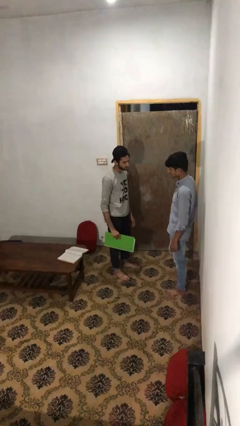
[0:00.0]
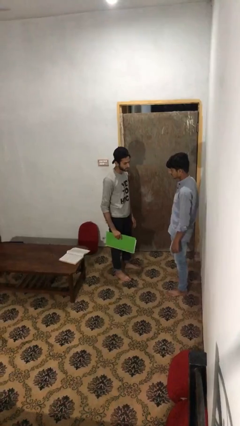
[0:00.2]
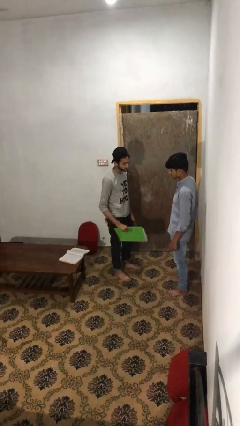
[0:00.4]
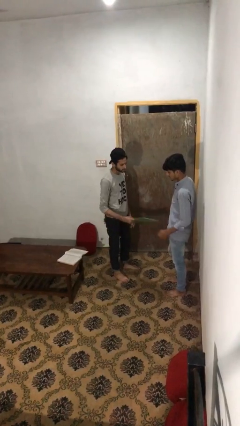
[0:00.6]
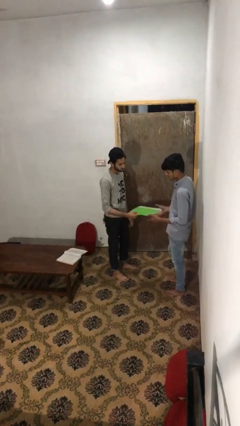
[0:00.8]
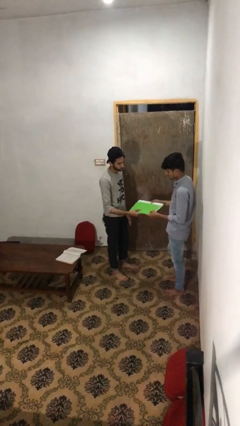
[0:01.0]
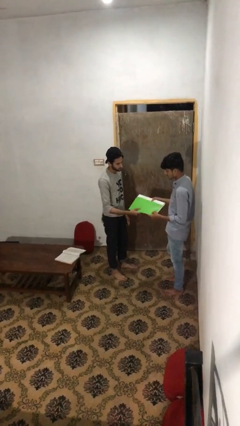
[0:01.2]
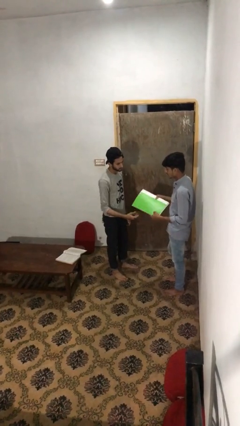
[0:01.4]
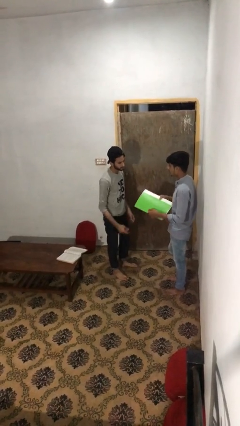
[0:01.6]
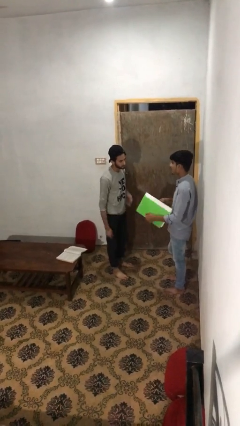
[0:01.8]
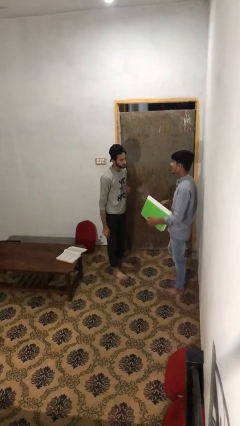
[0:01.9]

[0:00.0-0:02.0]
person transfers object to person

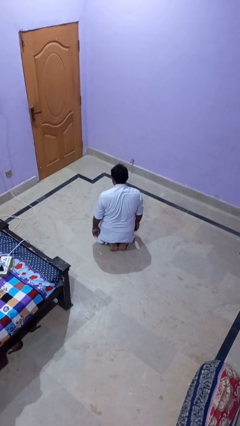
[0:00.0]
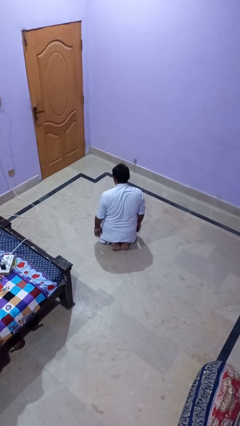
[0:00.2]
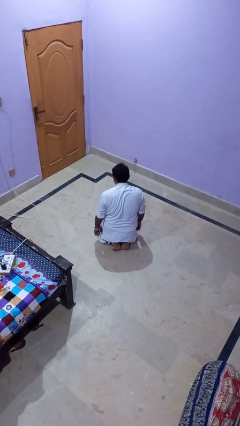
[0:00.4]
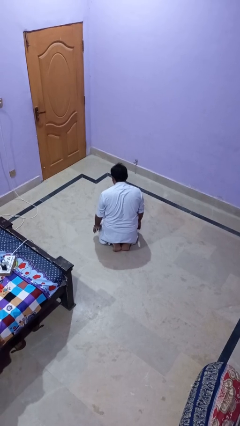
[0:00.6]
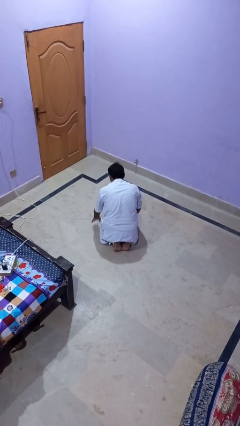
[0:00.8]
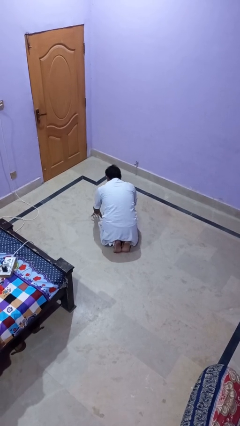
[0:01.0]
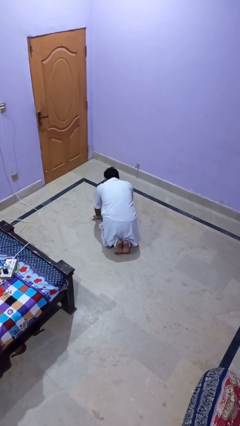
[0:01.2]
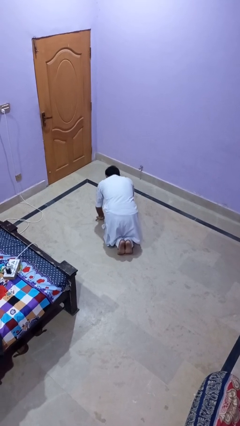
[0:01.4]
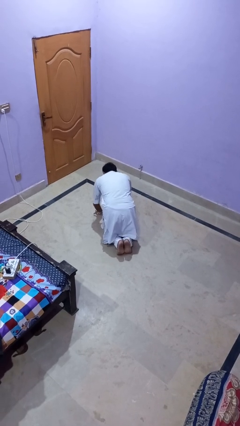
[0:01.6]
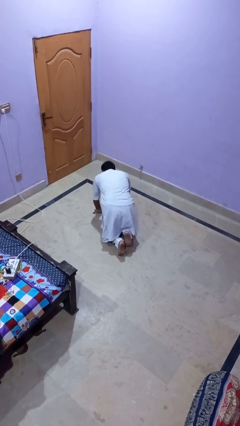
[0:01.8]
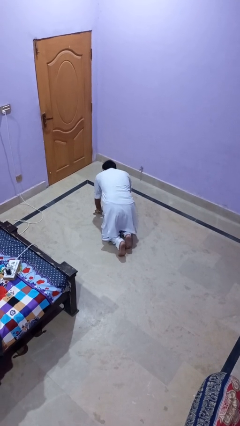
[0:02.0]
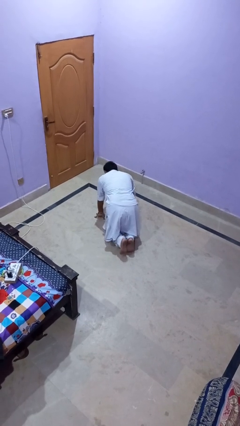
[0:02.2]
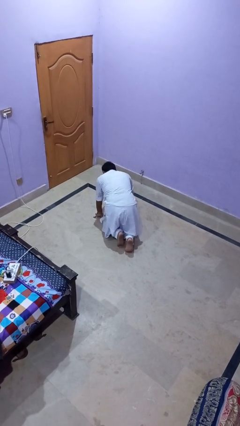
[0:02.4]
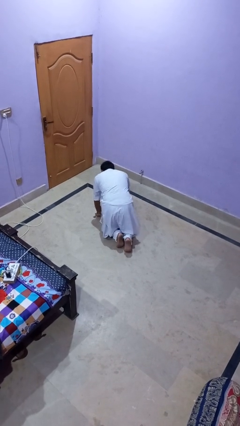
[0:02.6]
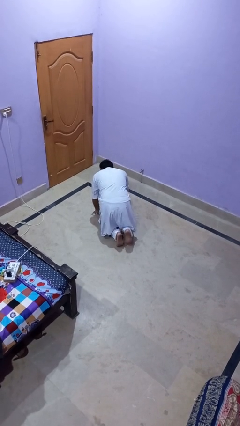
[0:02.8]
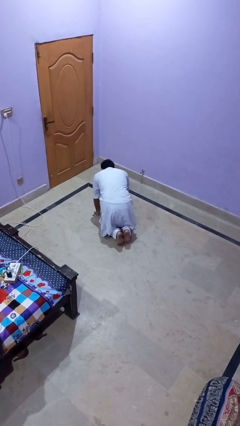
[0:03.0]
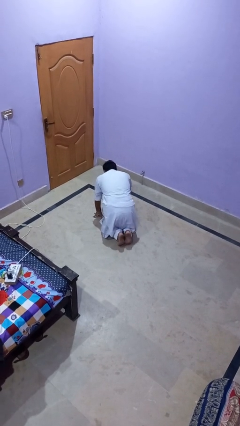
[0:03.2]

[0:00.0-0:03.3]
person crawls

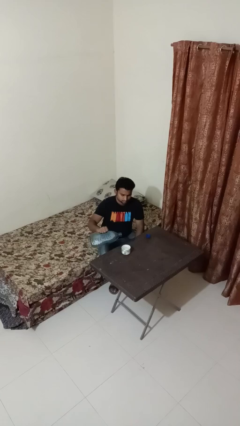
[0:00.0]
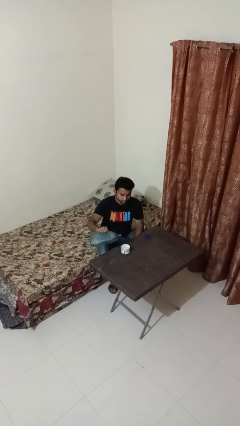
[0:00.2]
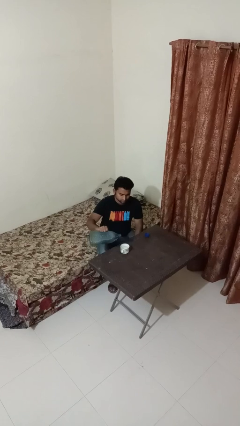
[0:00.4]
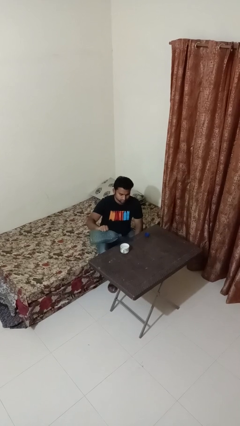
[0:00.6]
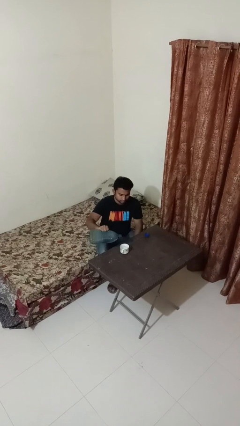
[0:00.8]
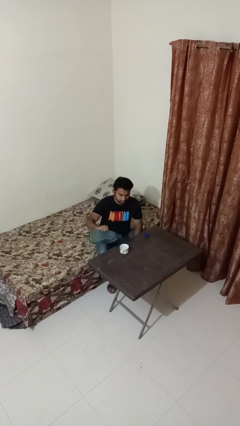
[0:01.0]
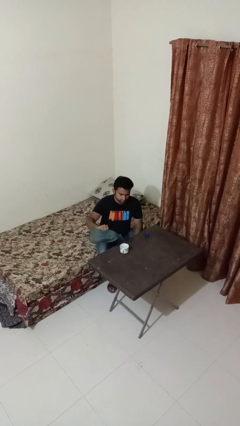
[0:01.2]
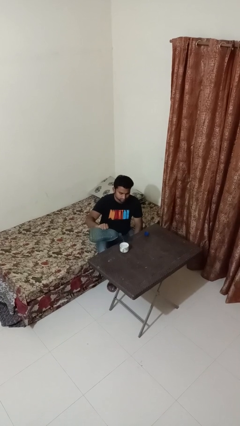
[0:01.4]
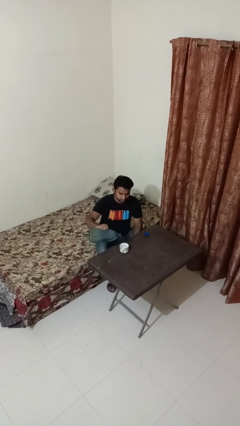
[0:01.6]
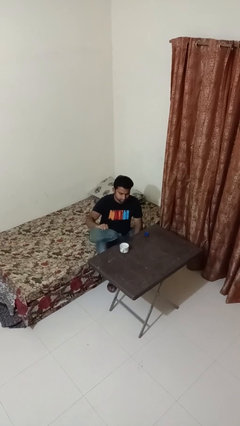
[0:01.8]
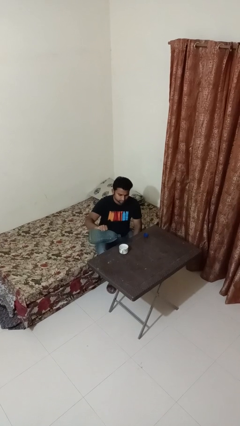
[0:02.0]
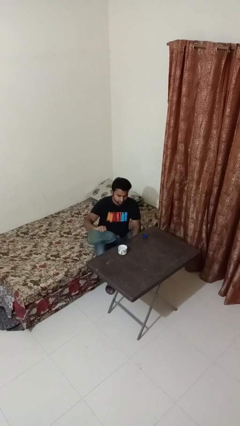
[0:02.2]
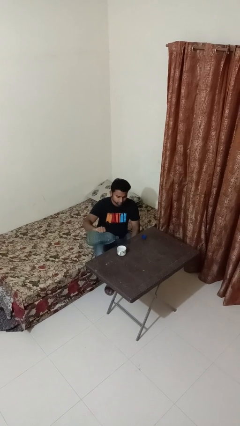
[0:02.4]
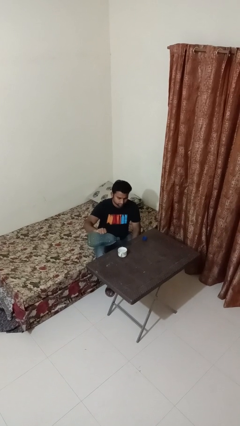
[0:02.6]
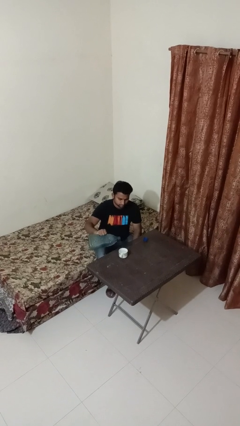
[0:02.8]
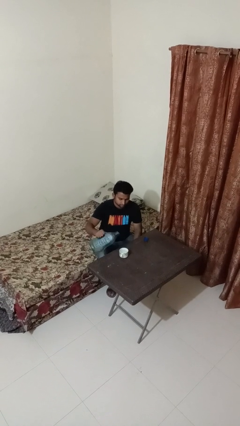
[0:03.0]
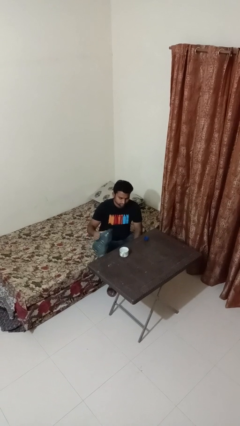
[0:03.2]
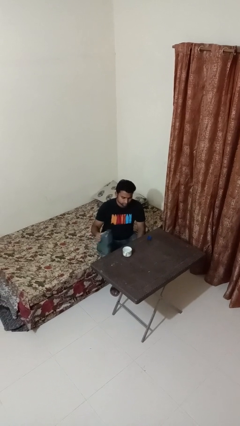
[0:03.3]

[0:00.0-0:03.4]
person pours liquid into cup

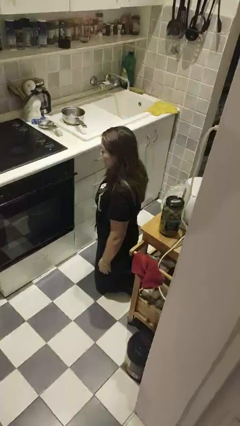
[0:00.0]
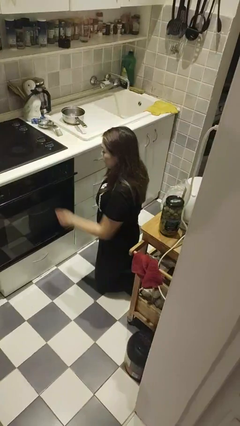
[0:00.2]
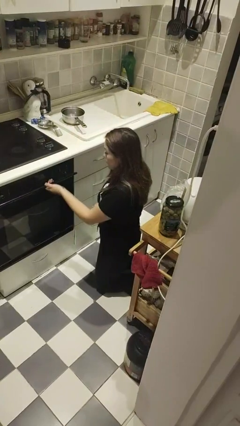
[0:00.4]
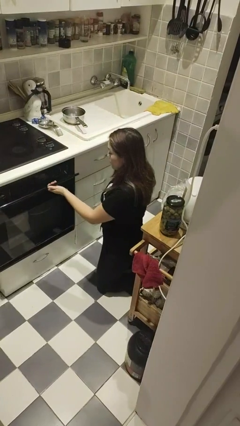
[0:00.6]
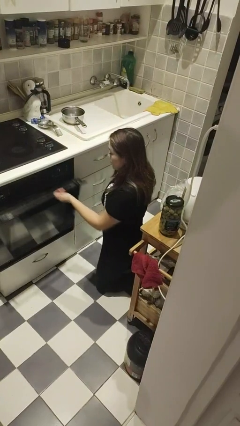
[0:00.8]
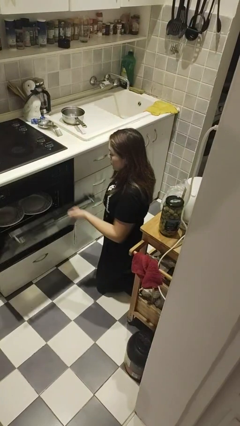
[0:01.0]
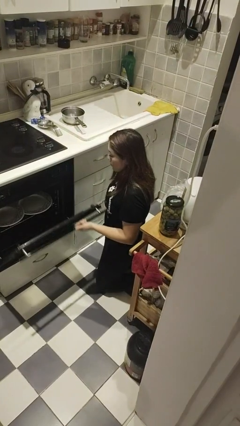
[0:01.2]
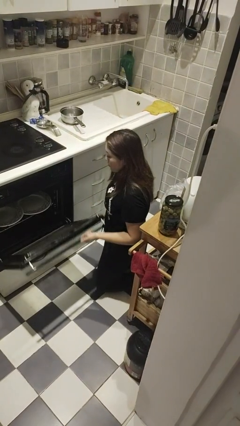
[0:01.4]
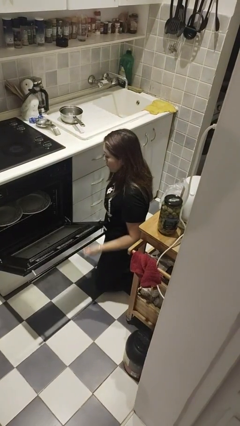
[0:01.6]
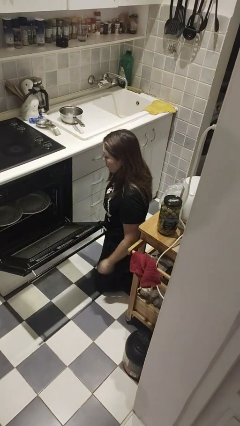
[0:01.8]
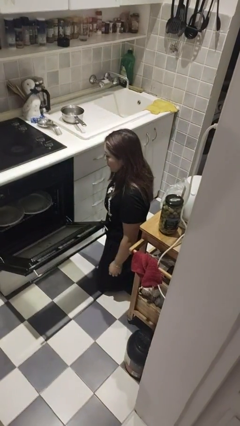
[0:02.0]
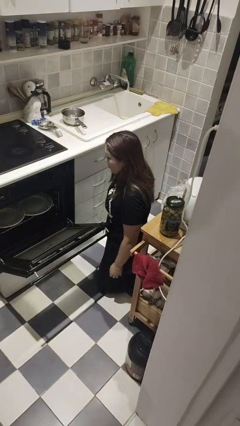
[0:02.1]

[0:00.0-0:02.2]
person opens dishwasher

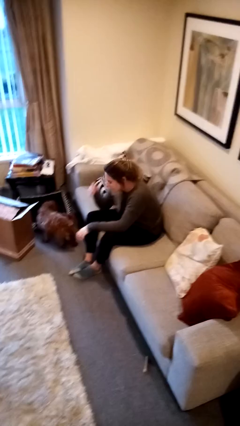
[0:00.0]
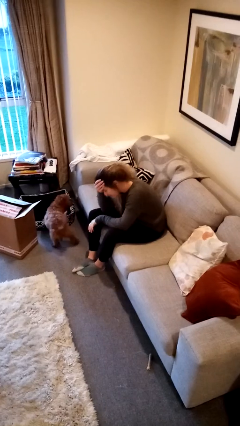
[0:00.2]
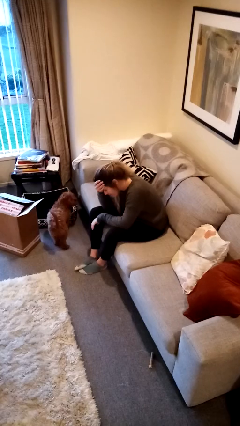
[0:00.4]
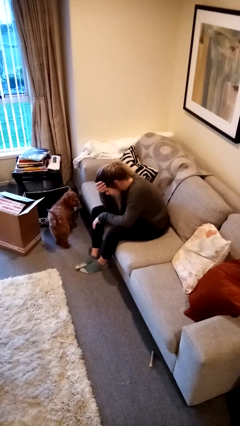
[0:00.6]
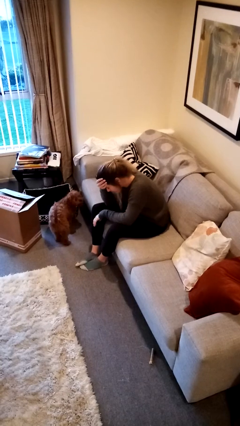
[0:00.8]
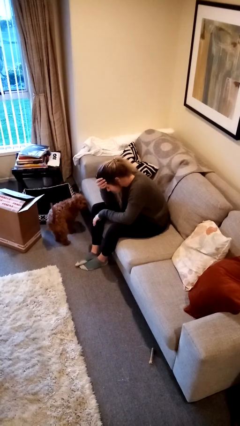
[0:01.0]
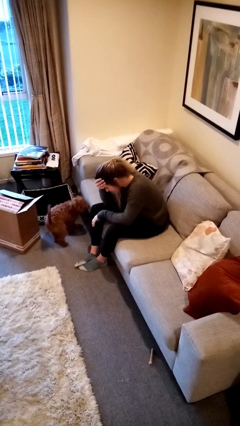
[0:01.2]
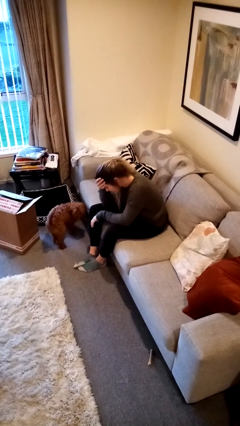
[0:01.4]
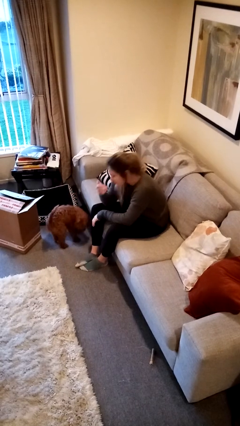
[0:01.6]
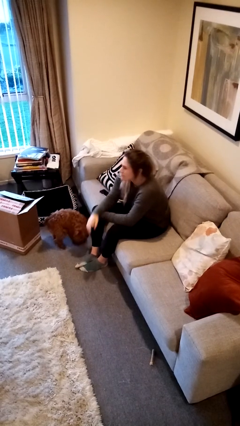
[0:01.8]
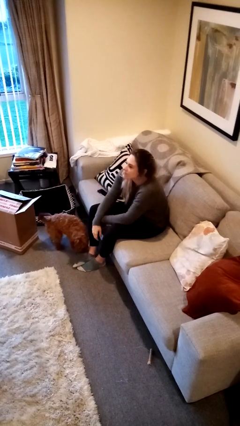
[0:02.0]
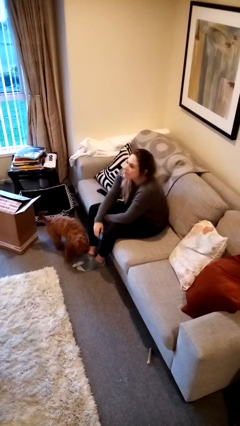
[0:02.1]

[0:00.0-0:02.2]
person covers face with hands

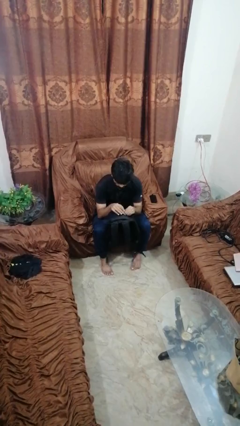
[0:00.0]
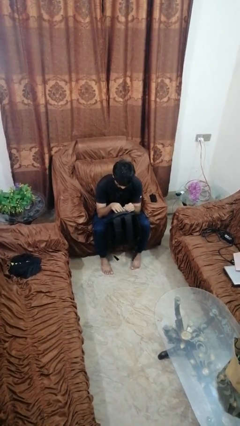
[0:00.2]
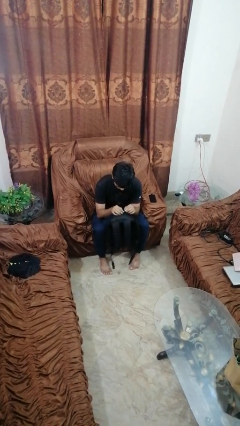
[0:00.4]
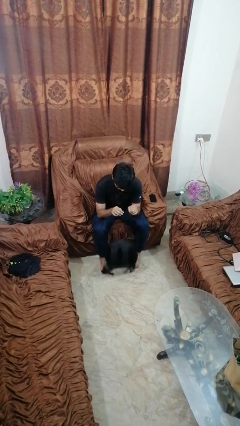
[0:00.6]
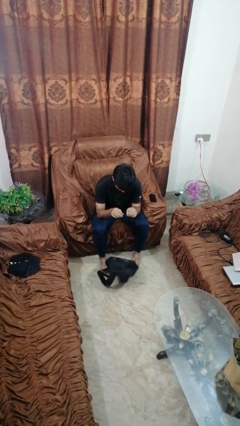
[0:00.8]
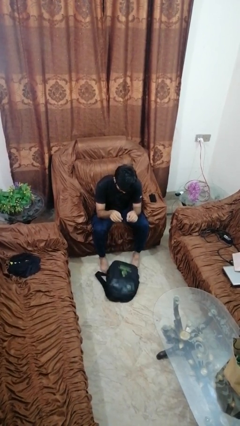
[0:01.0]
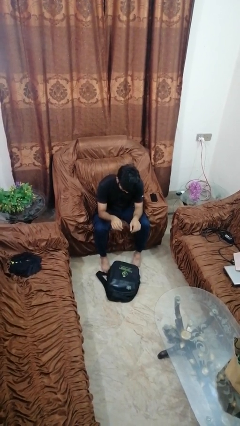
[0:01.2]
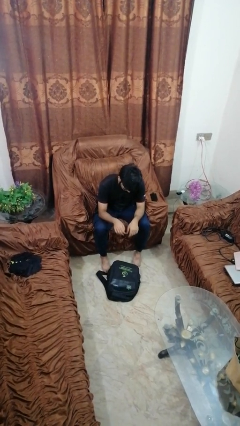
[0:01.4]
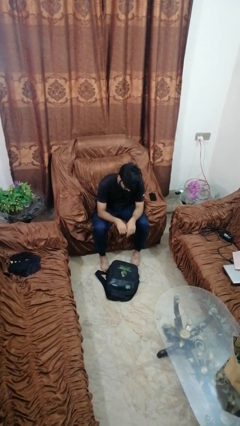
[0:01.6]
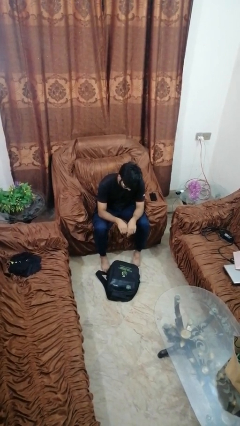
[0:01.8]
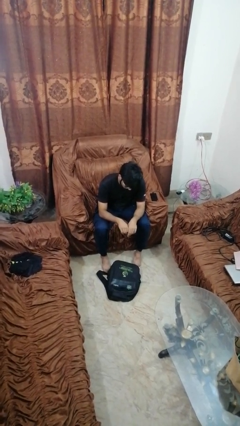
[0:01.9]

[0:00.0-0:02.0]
person drops object

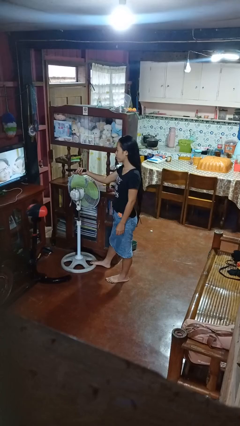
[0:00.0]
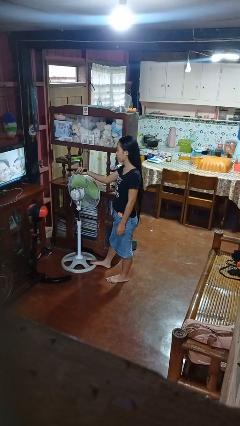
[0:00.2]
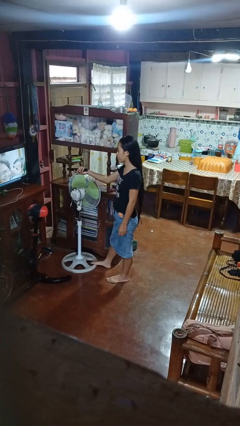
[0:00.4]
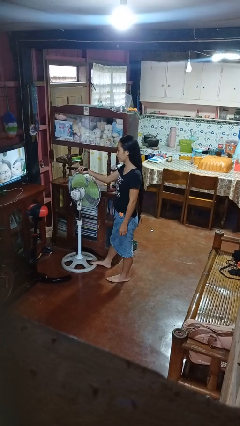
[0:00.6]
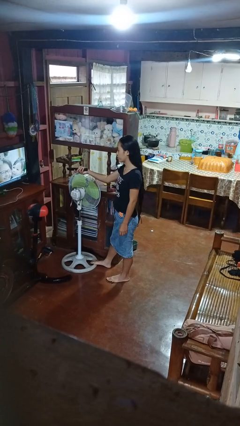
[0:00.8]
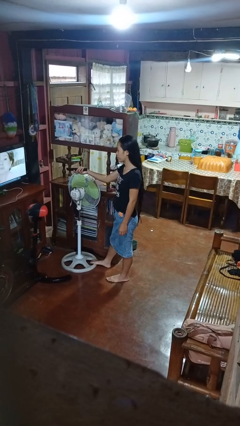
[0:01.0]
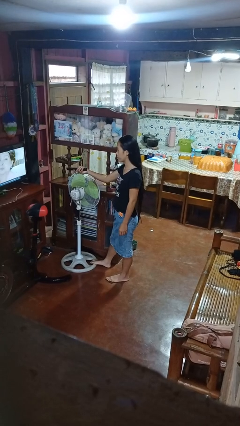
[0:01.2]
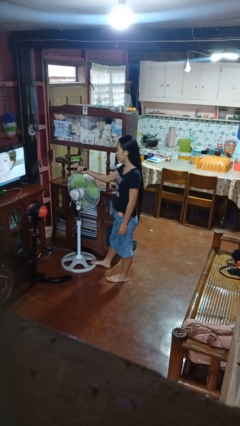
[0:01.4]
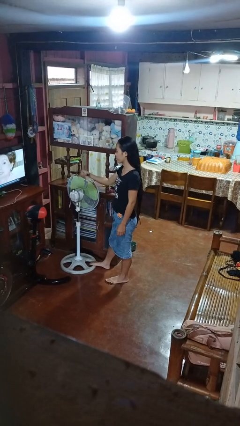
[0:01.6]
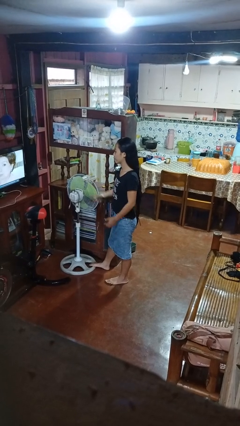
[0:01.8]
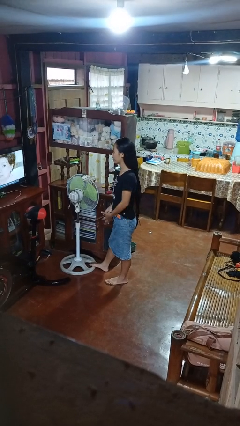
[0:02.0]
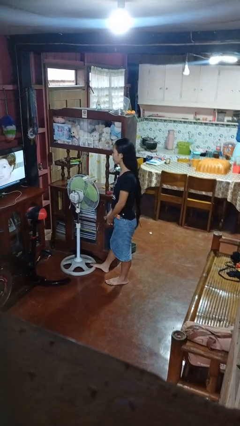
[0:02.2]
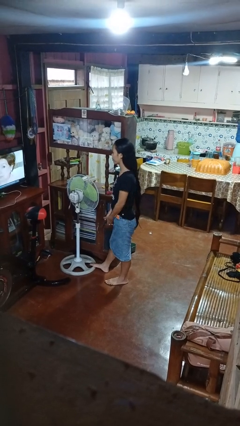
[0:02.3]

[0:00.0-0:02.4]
person uses television remote
